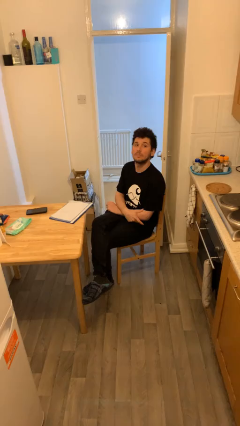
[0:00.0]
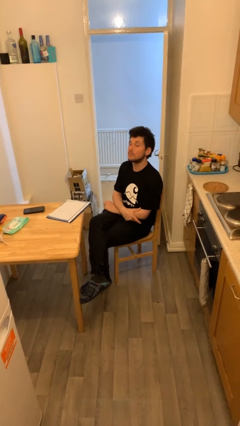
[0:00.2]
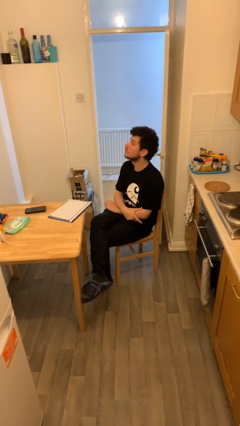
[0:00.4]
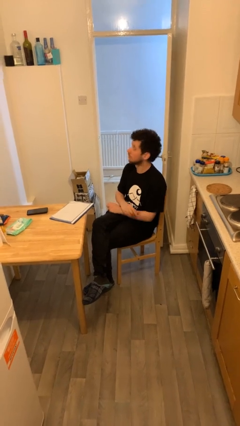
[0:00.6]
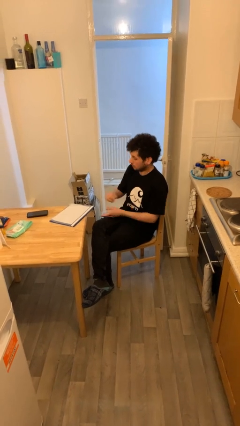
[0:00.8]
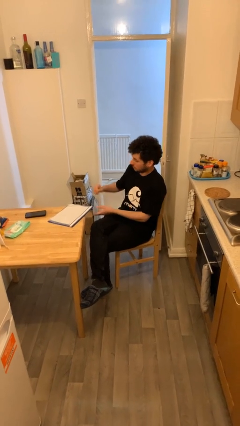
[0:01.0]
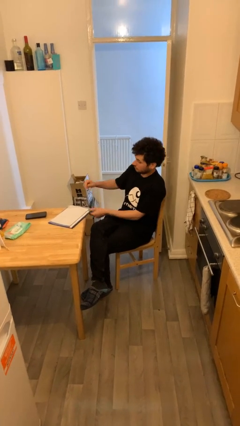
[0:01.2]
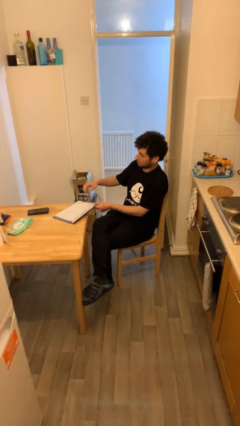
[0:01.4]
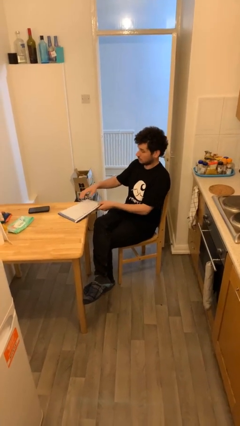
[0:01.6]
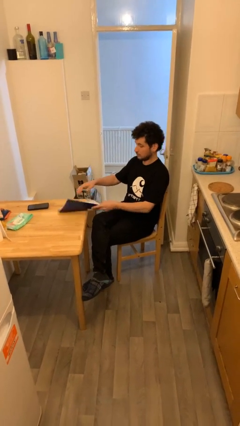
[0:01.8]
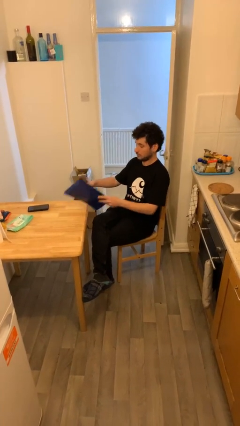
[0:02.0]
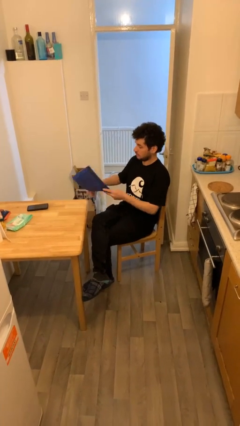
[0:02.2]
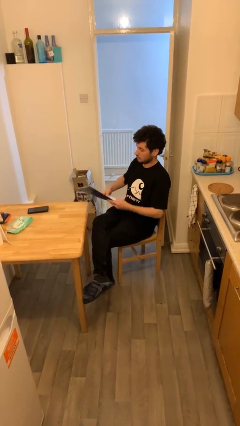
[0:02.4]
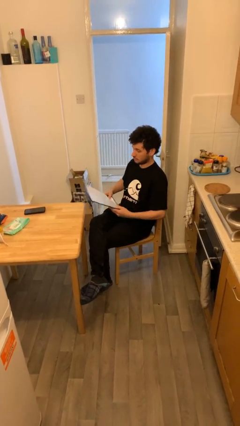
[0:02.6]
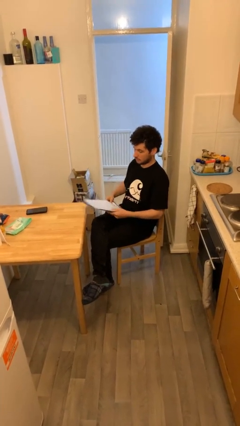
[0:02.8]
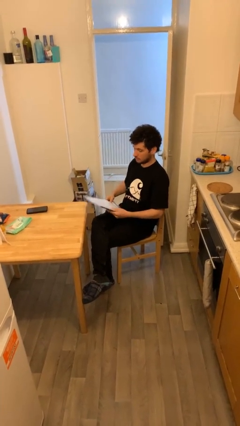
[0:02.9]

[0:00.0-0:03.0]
person picks up object from table

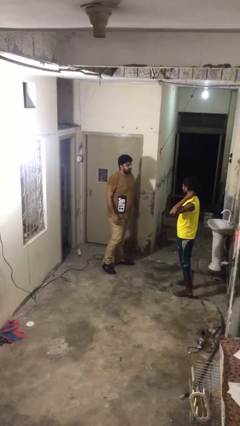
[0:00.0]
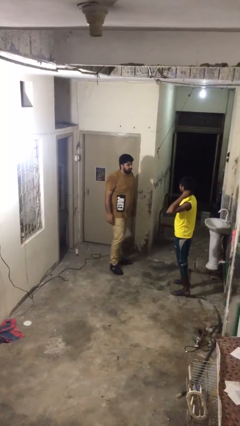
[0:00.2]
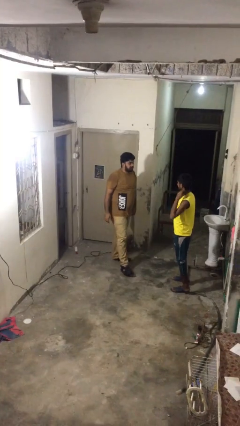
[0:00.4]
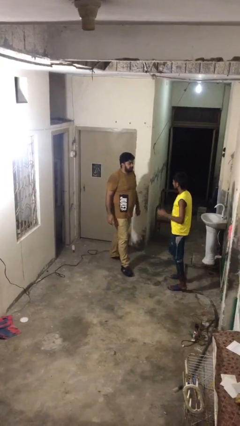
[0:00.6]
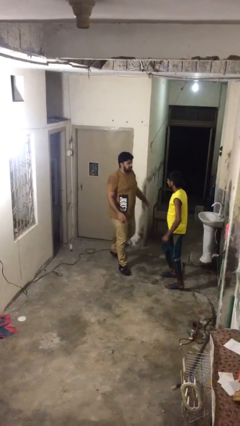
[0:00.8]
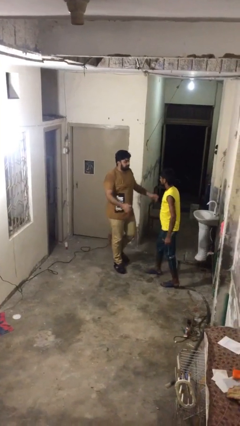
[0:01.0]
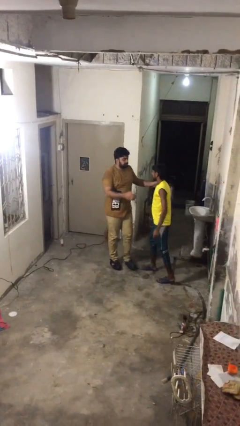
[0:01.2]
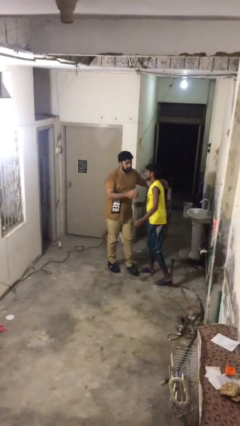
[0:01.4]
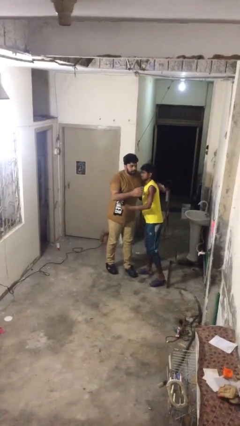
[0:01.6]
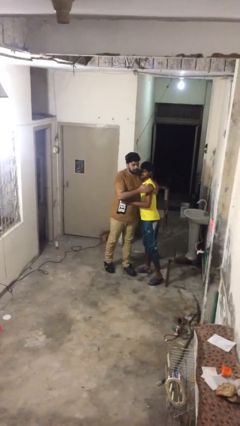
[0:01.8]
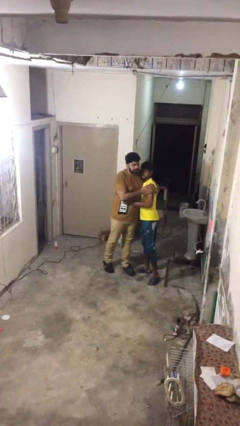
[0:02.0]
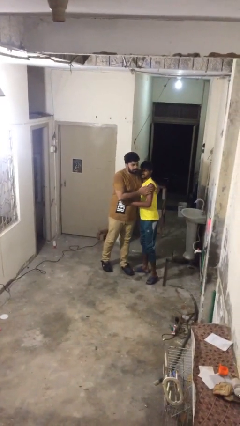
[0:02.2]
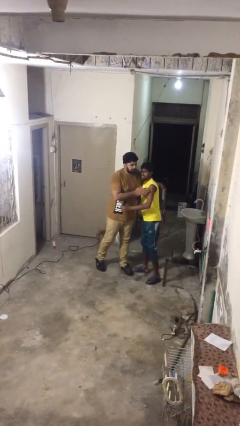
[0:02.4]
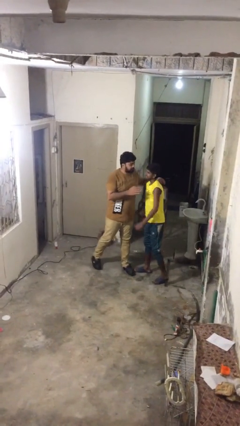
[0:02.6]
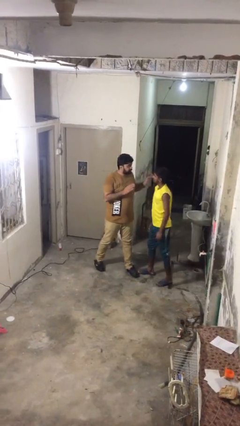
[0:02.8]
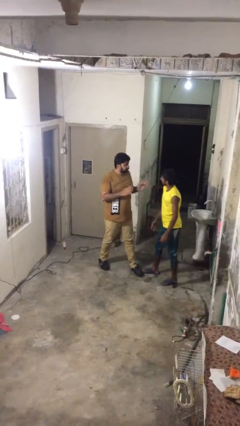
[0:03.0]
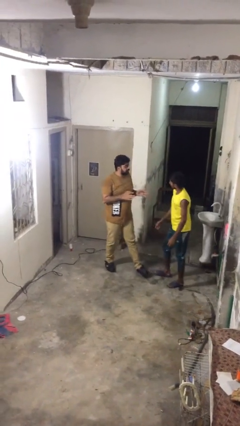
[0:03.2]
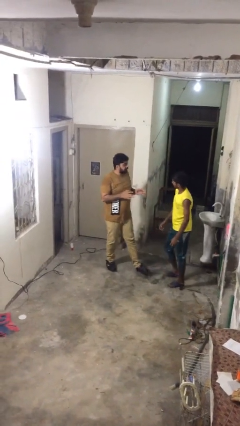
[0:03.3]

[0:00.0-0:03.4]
person embraces person

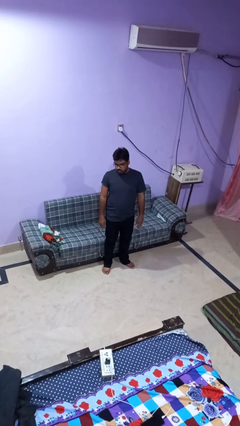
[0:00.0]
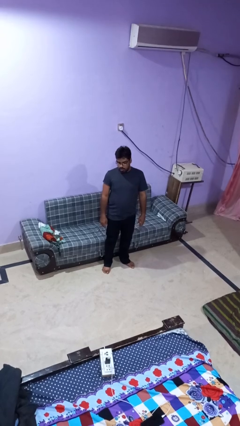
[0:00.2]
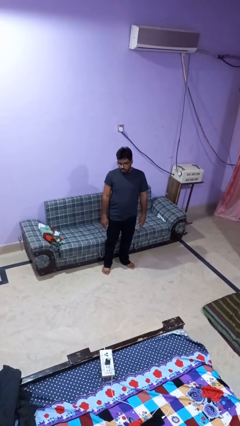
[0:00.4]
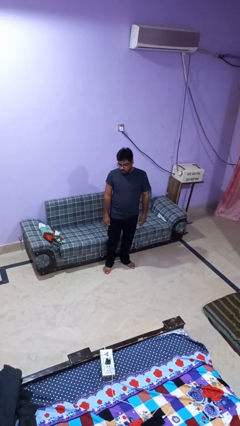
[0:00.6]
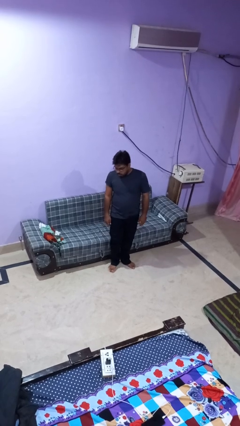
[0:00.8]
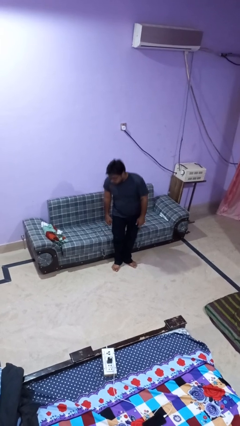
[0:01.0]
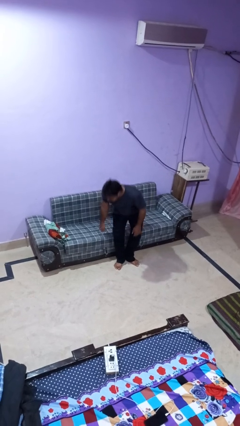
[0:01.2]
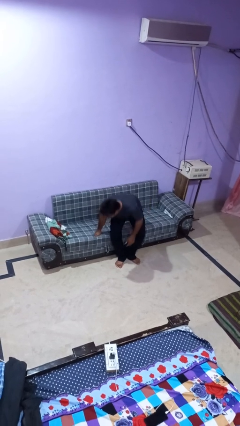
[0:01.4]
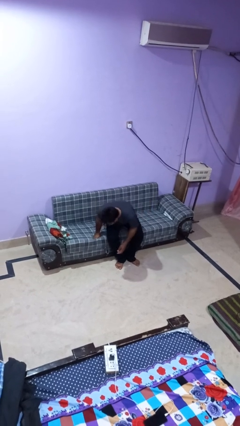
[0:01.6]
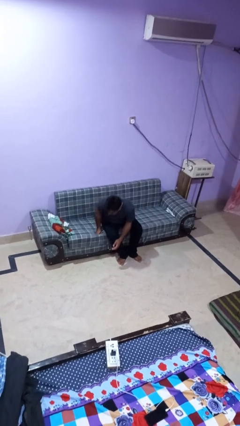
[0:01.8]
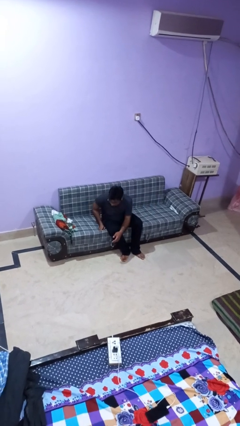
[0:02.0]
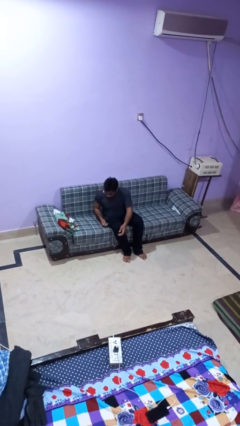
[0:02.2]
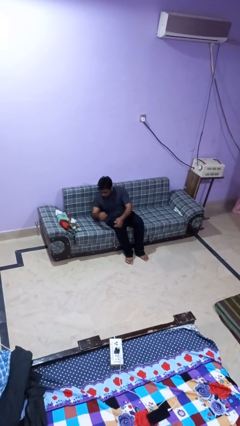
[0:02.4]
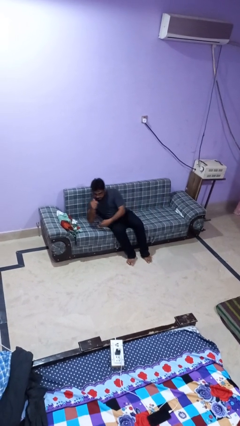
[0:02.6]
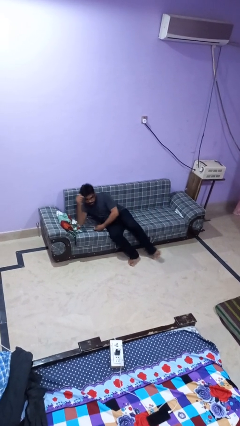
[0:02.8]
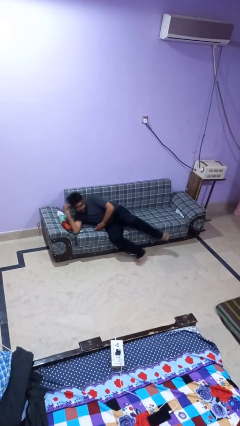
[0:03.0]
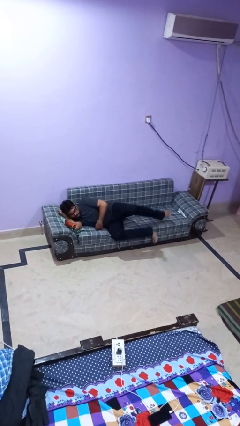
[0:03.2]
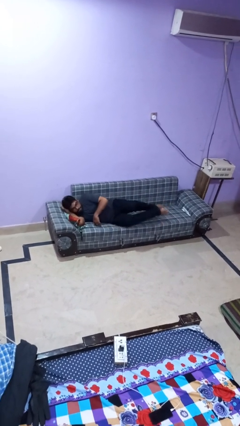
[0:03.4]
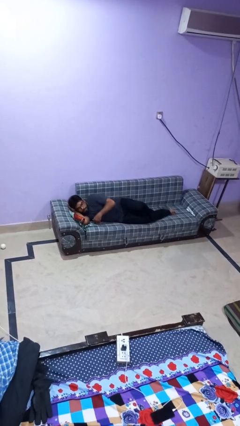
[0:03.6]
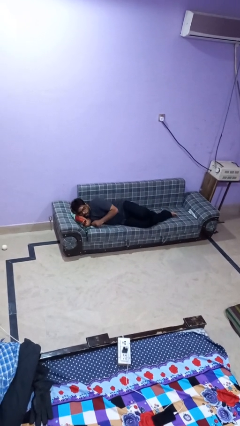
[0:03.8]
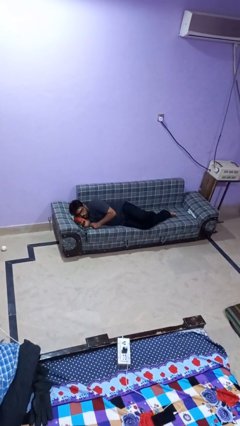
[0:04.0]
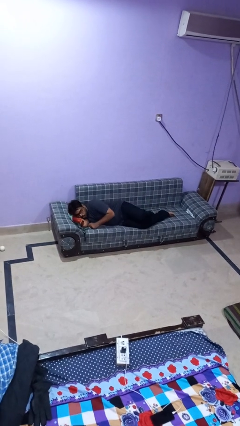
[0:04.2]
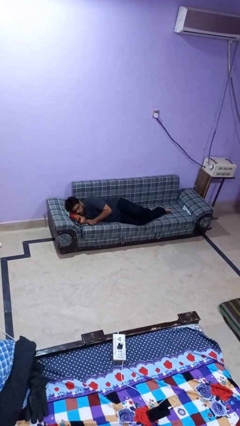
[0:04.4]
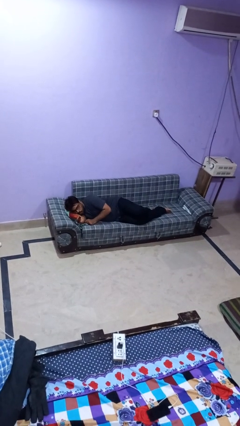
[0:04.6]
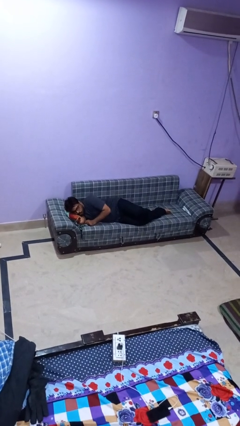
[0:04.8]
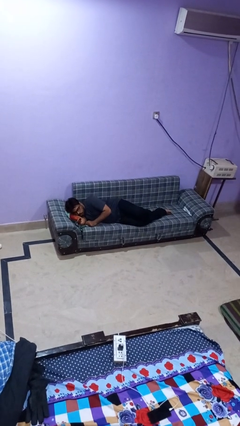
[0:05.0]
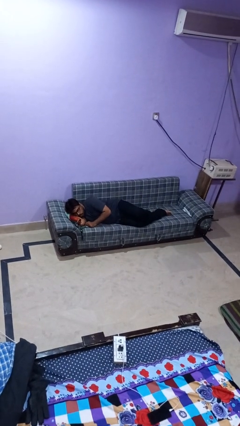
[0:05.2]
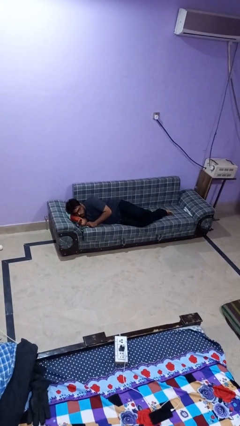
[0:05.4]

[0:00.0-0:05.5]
person lies down on couch

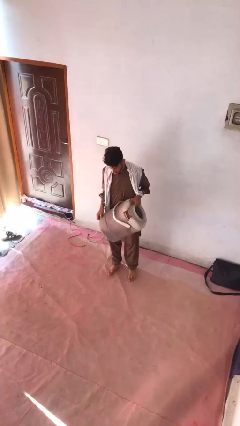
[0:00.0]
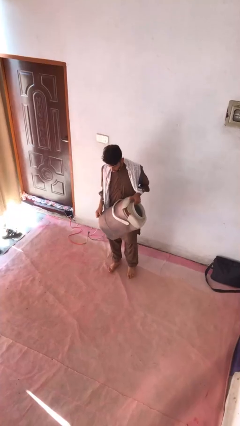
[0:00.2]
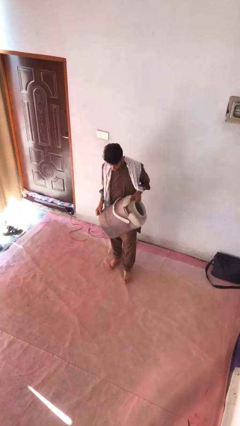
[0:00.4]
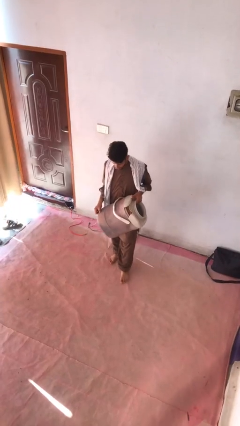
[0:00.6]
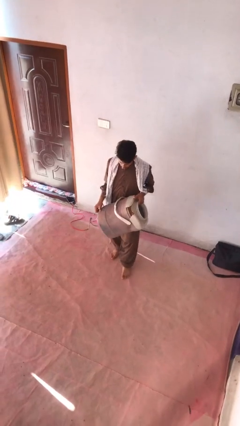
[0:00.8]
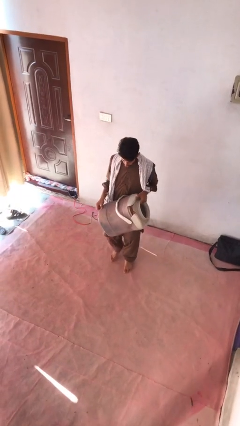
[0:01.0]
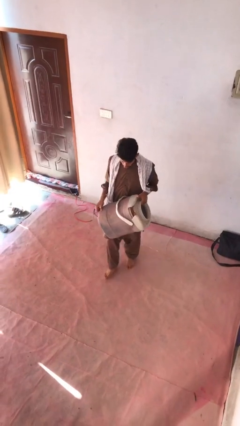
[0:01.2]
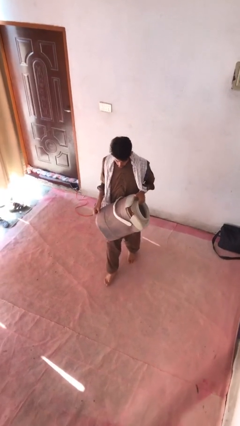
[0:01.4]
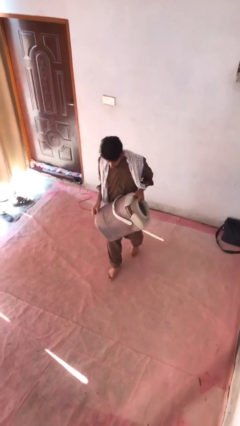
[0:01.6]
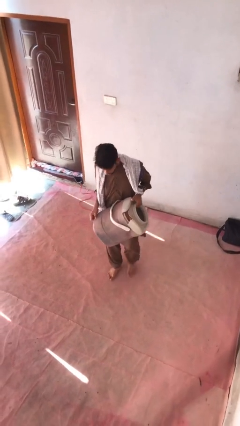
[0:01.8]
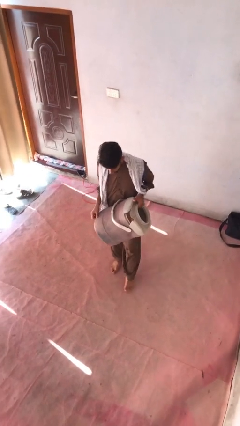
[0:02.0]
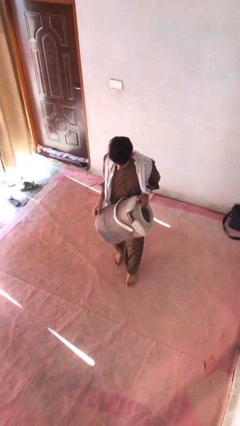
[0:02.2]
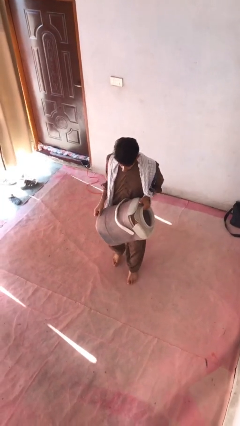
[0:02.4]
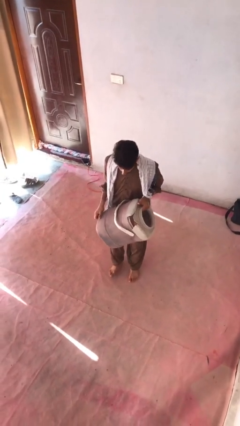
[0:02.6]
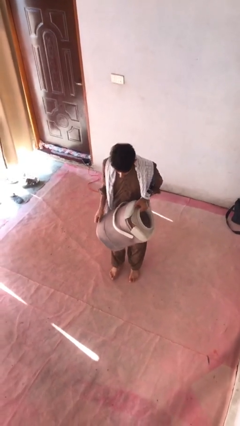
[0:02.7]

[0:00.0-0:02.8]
person carries heavy object

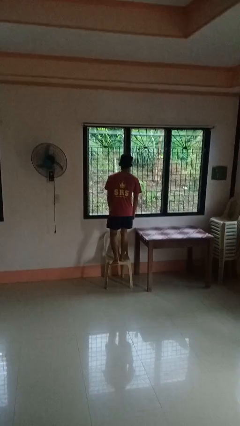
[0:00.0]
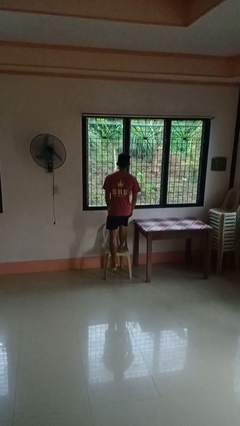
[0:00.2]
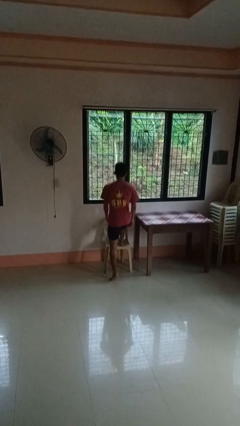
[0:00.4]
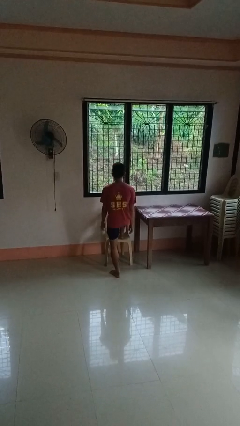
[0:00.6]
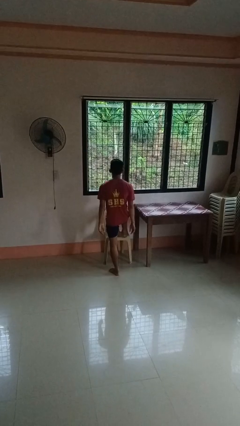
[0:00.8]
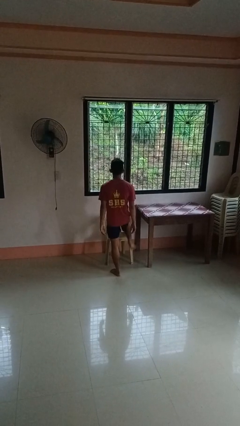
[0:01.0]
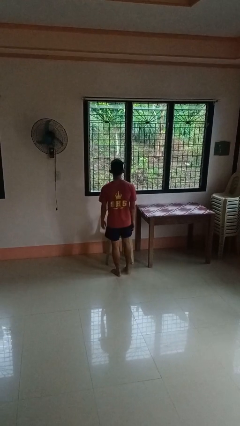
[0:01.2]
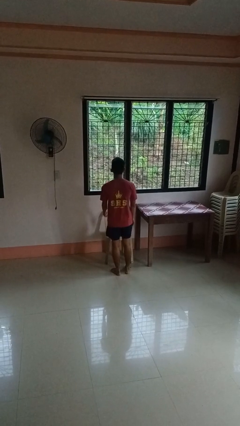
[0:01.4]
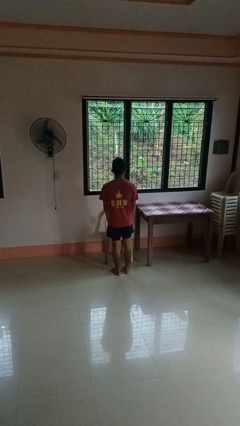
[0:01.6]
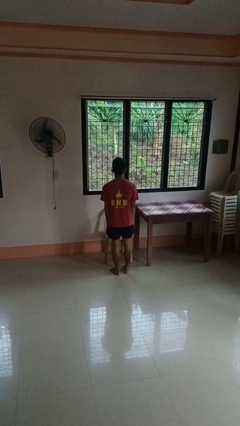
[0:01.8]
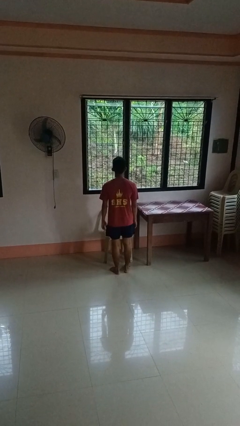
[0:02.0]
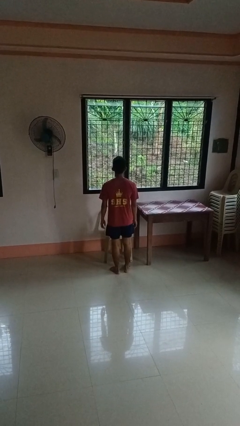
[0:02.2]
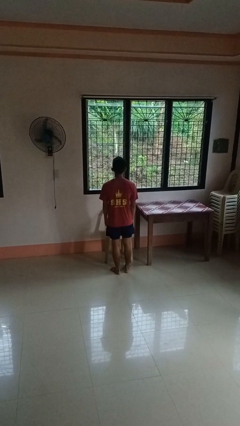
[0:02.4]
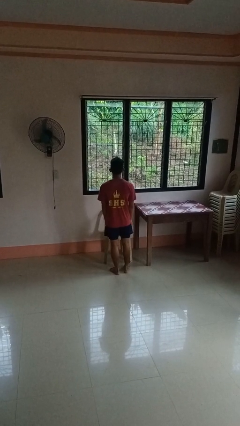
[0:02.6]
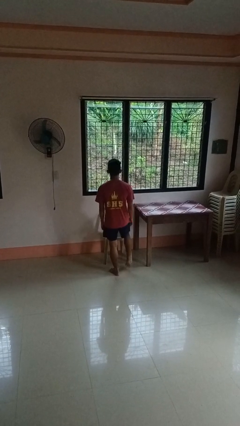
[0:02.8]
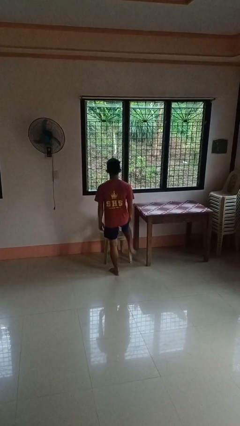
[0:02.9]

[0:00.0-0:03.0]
person climbs off chair

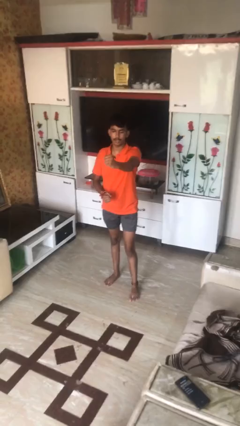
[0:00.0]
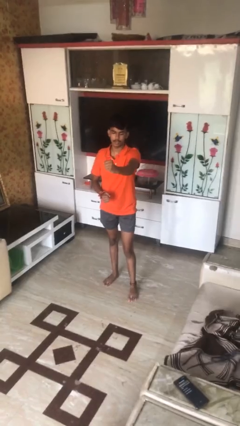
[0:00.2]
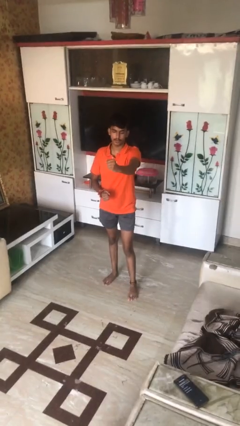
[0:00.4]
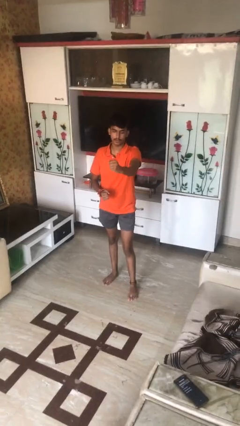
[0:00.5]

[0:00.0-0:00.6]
person punches
